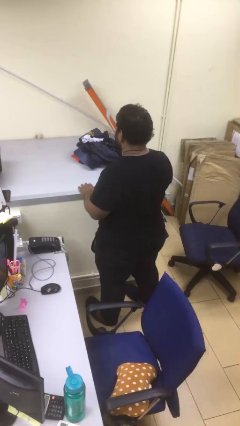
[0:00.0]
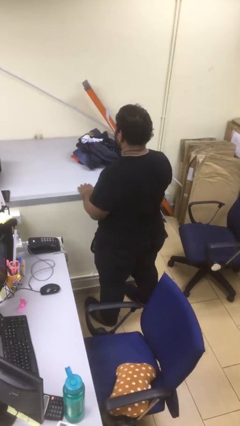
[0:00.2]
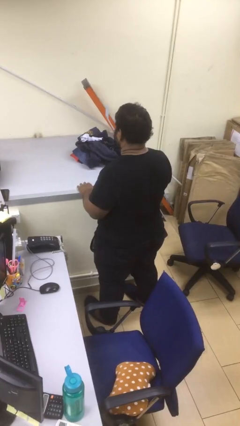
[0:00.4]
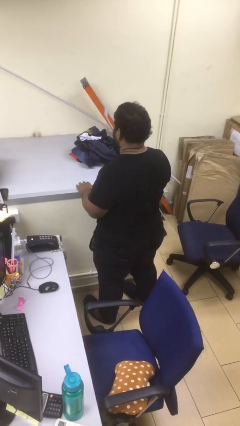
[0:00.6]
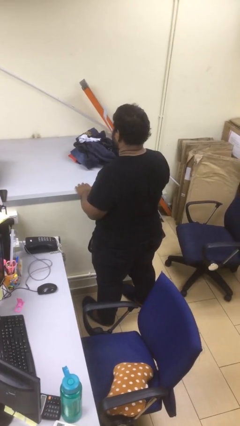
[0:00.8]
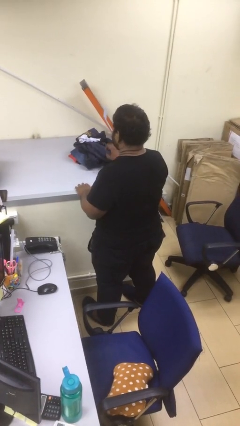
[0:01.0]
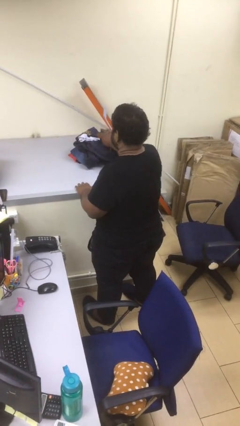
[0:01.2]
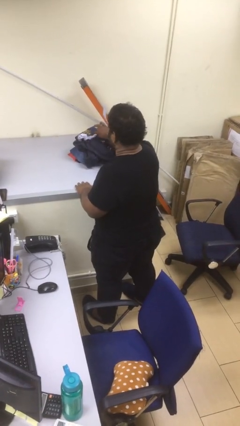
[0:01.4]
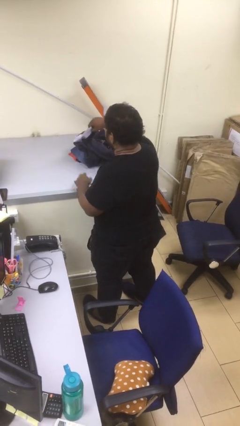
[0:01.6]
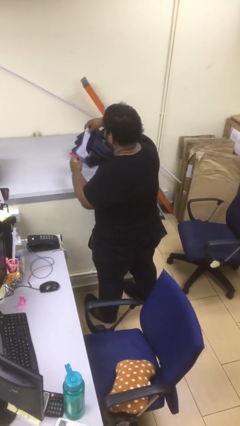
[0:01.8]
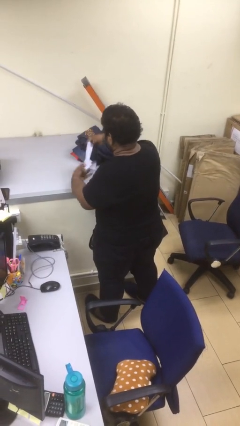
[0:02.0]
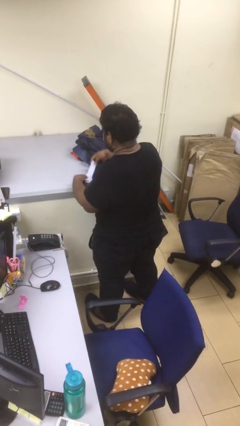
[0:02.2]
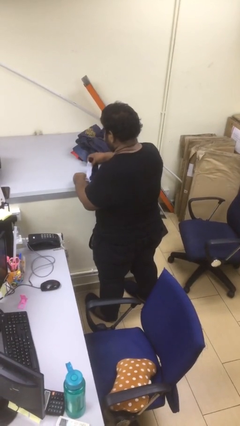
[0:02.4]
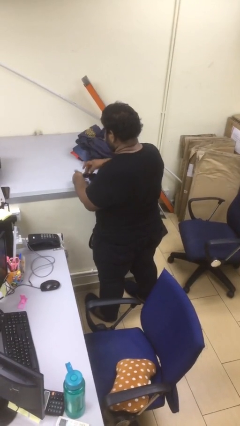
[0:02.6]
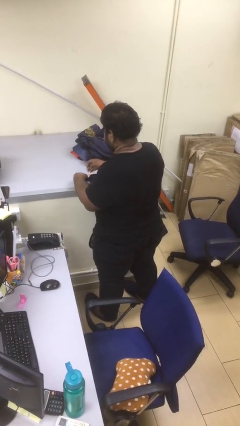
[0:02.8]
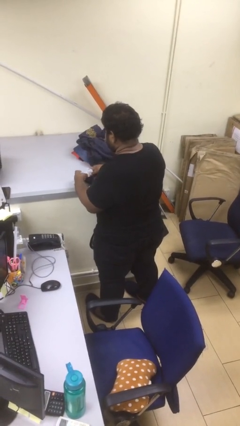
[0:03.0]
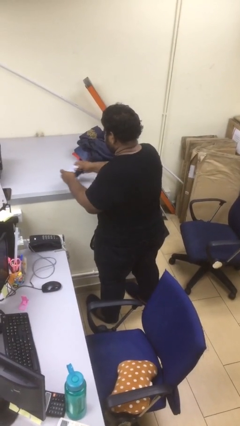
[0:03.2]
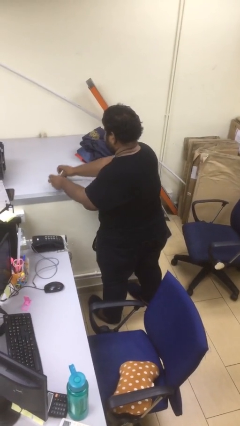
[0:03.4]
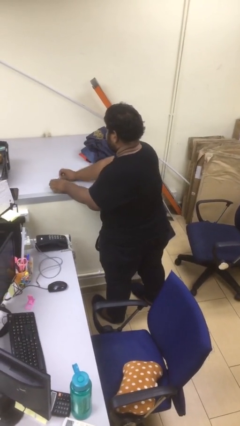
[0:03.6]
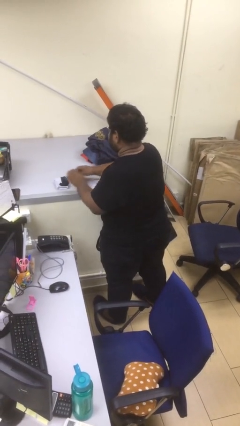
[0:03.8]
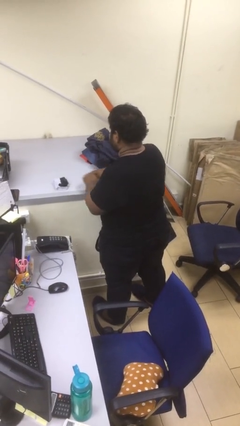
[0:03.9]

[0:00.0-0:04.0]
person folds socks

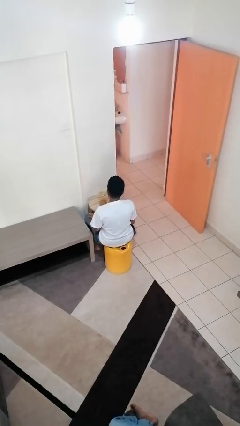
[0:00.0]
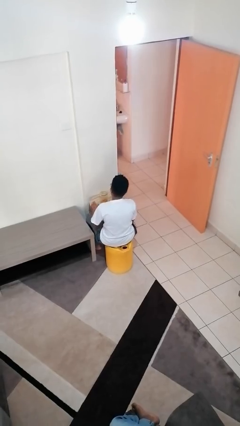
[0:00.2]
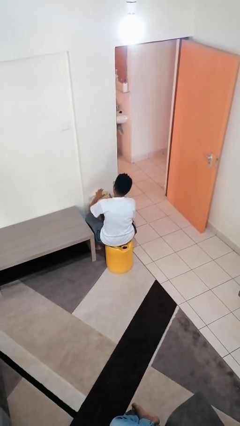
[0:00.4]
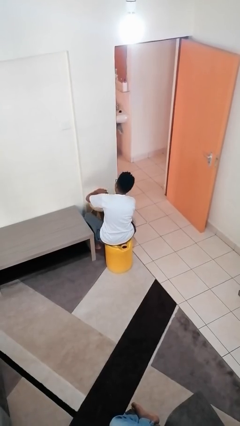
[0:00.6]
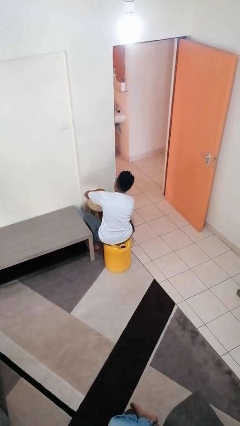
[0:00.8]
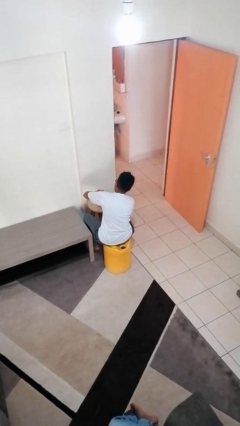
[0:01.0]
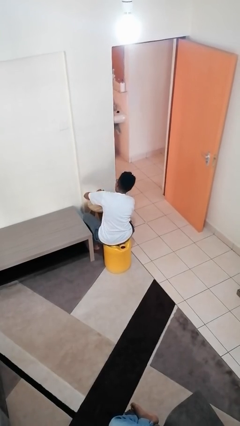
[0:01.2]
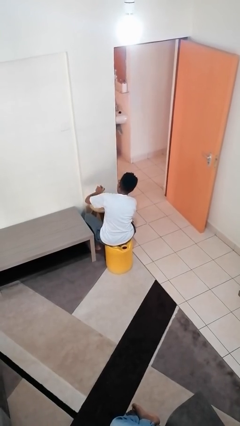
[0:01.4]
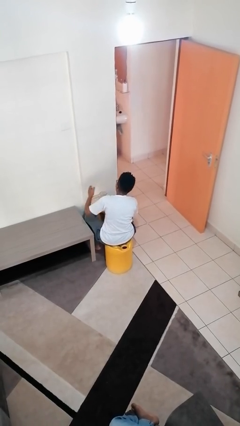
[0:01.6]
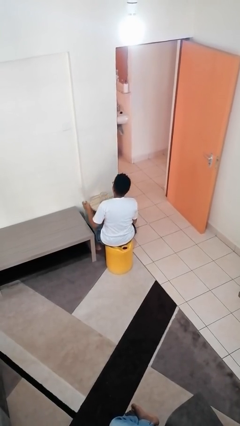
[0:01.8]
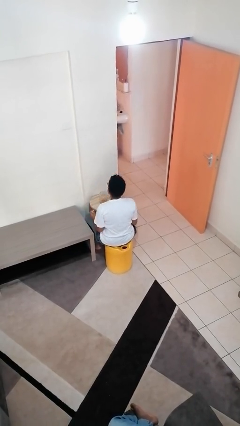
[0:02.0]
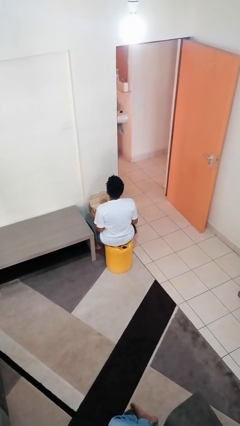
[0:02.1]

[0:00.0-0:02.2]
person opens jar

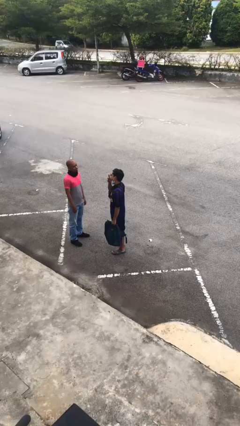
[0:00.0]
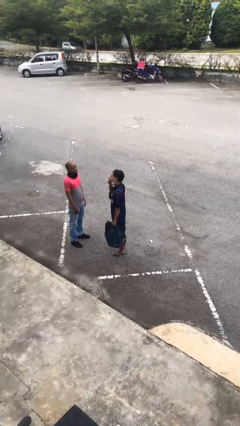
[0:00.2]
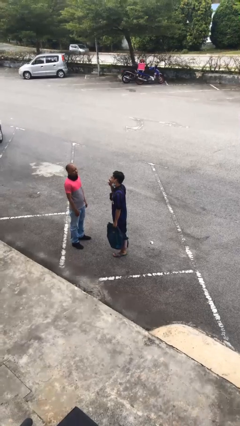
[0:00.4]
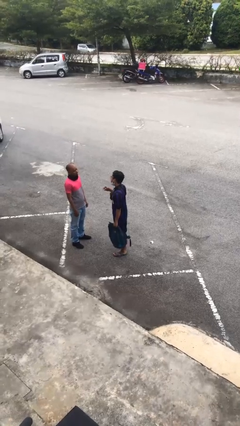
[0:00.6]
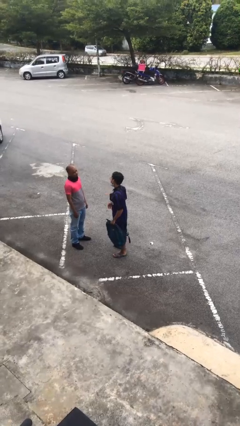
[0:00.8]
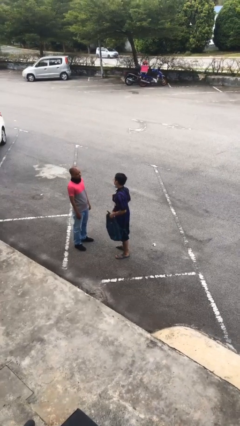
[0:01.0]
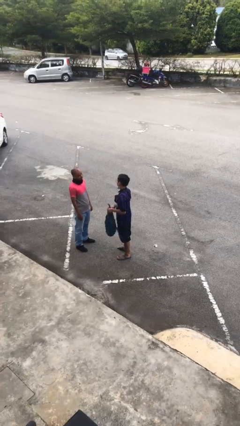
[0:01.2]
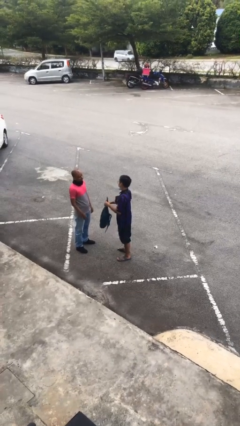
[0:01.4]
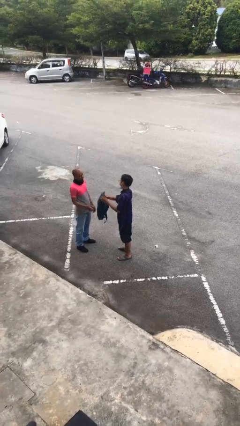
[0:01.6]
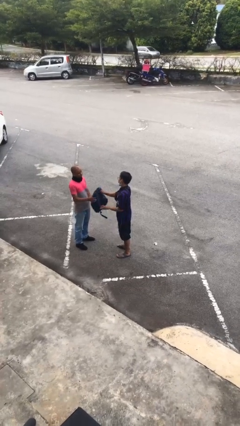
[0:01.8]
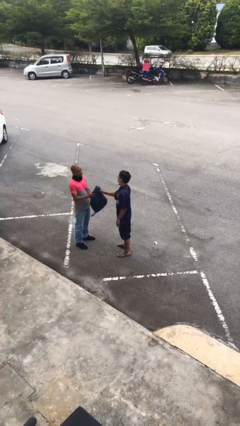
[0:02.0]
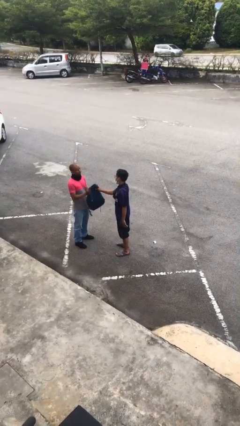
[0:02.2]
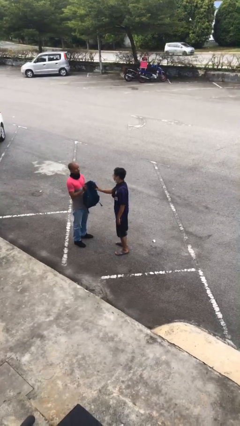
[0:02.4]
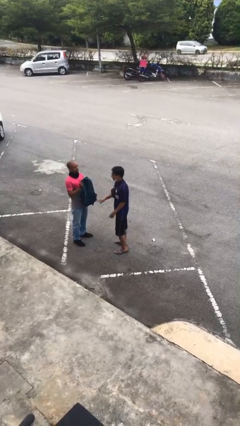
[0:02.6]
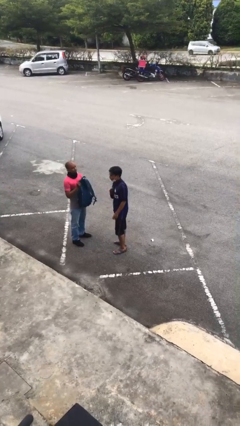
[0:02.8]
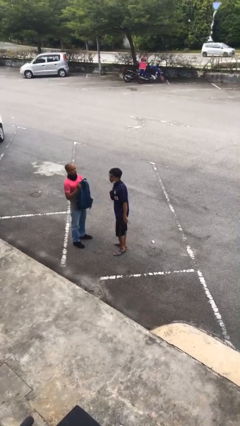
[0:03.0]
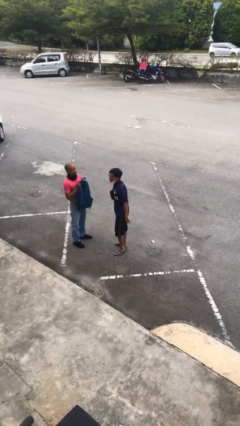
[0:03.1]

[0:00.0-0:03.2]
person transfers object to person

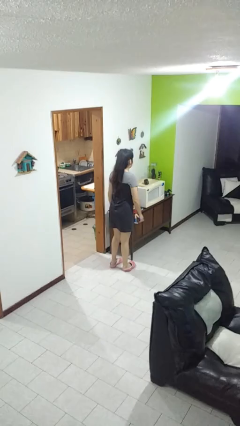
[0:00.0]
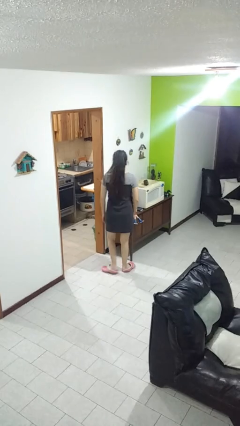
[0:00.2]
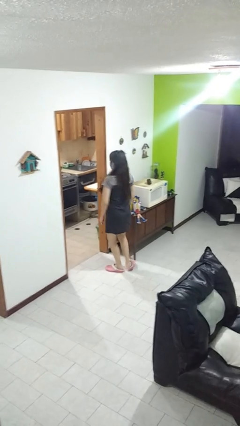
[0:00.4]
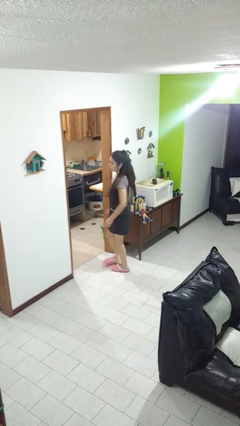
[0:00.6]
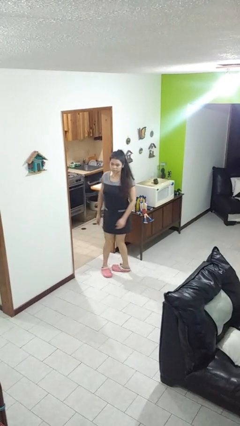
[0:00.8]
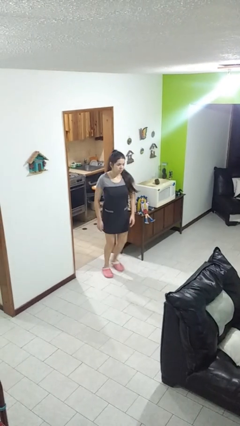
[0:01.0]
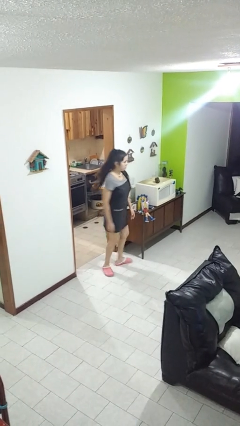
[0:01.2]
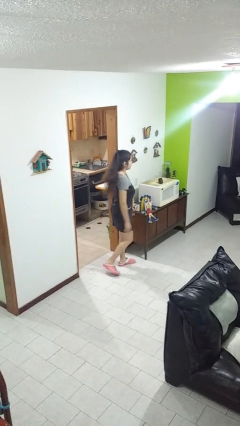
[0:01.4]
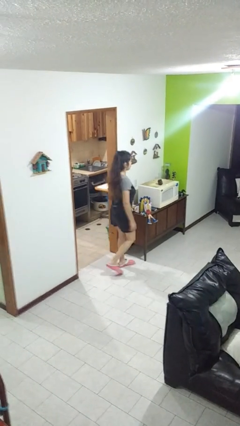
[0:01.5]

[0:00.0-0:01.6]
person twirls

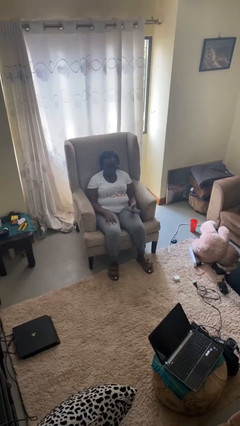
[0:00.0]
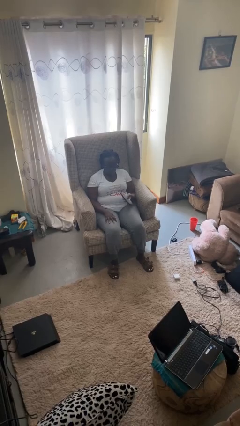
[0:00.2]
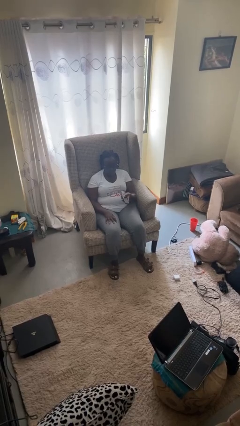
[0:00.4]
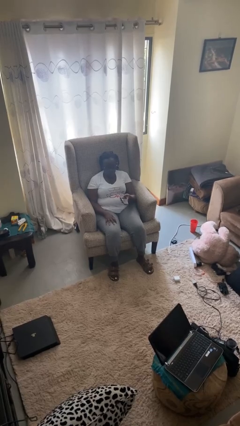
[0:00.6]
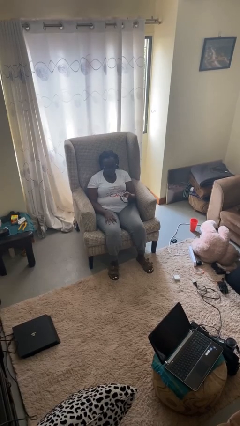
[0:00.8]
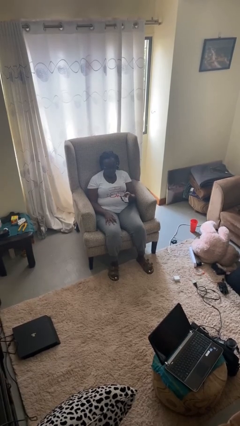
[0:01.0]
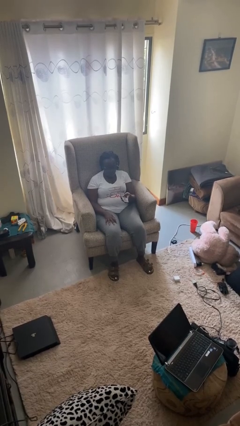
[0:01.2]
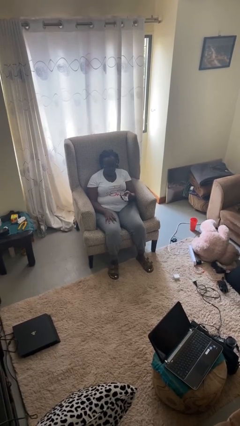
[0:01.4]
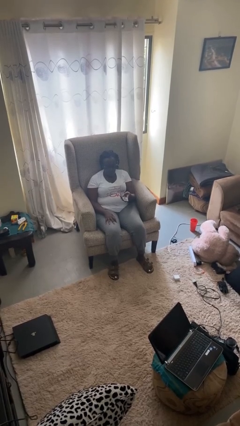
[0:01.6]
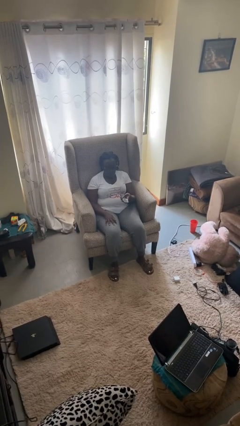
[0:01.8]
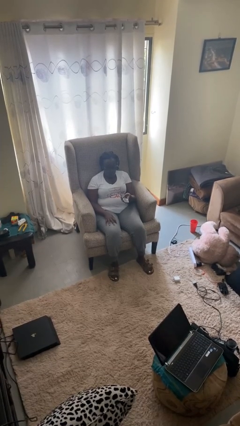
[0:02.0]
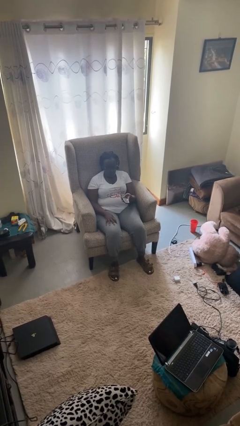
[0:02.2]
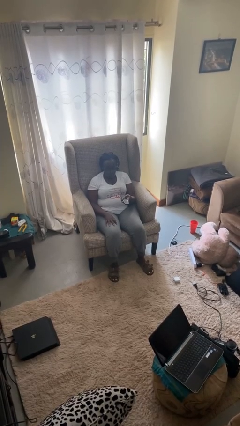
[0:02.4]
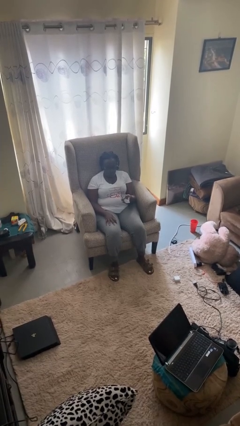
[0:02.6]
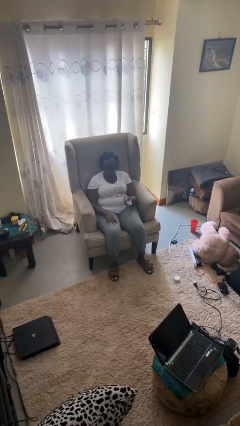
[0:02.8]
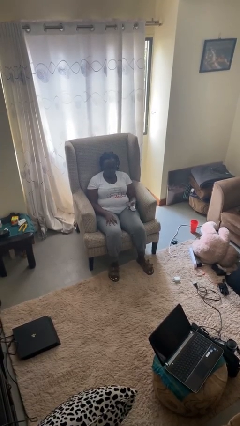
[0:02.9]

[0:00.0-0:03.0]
person uses television remote

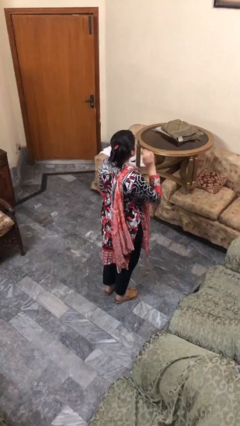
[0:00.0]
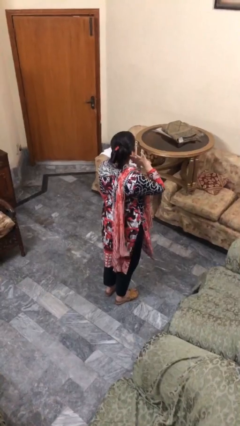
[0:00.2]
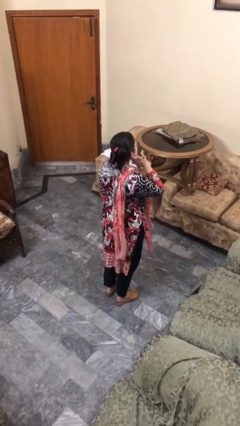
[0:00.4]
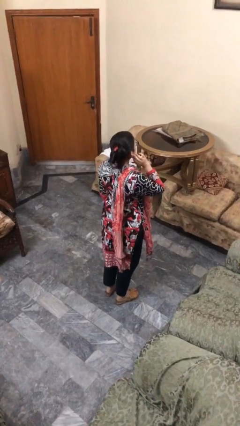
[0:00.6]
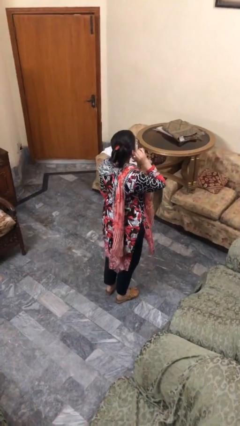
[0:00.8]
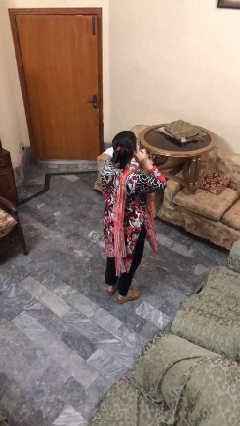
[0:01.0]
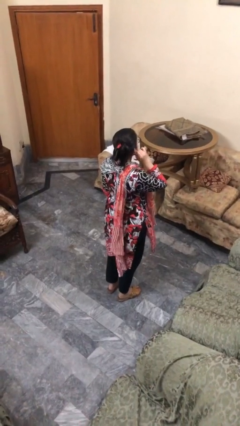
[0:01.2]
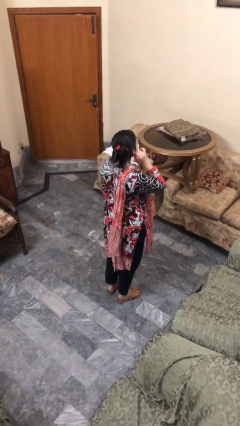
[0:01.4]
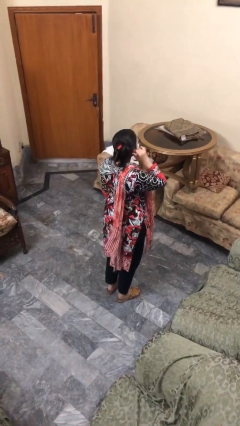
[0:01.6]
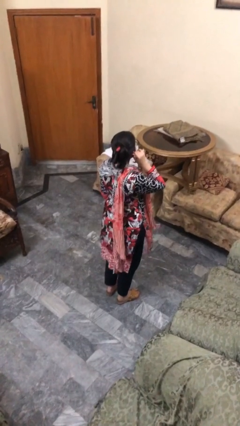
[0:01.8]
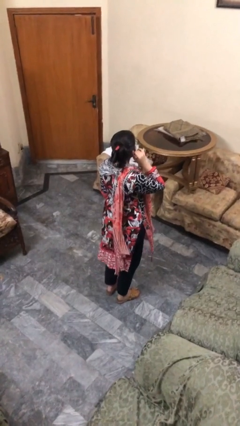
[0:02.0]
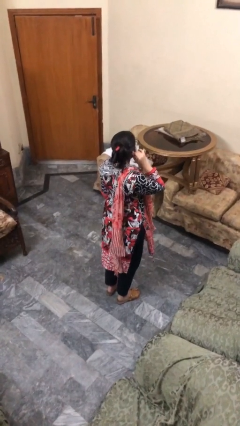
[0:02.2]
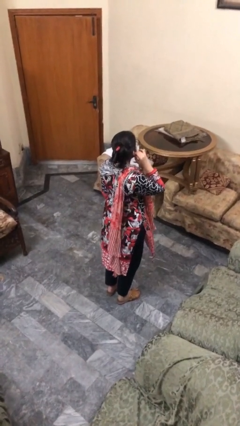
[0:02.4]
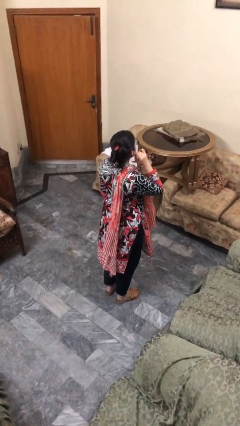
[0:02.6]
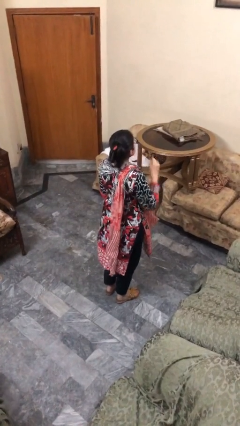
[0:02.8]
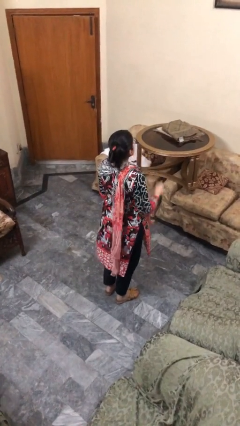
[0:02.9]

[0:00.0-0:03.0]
person touches earlobe
